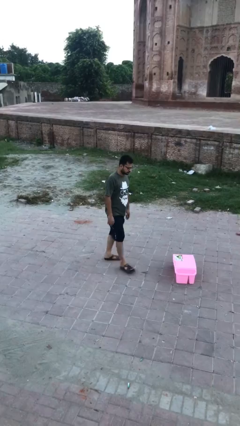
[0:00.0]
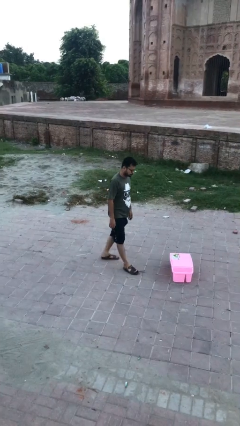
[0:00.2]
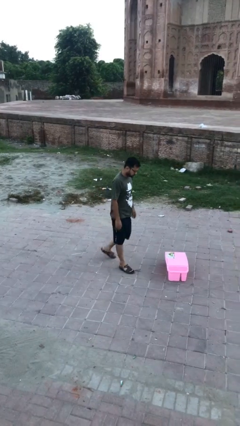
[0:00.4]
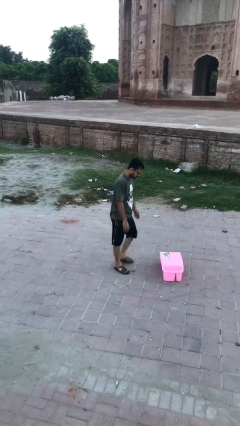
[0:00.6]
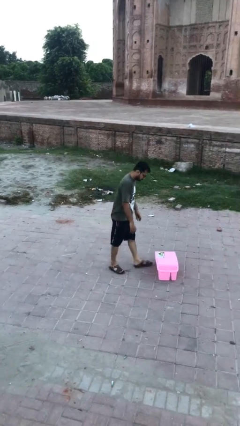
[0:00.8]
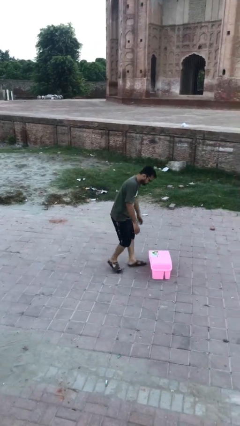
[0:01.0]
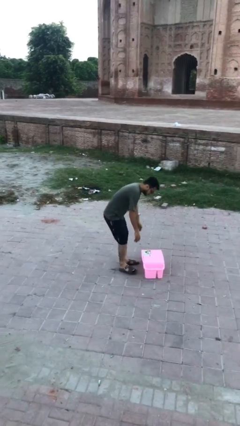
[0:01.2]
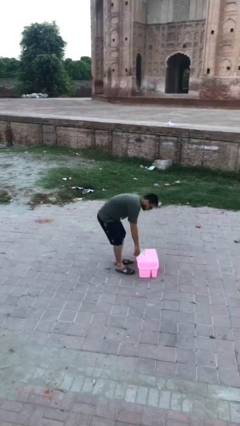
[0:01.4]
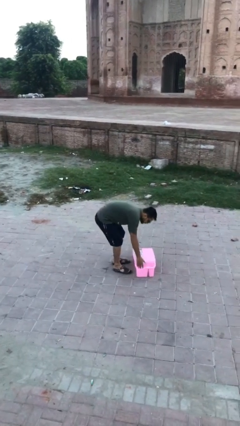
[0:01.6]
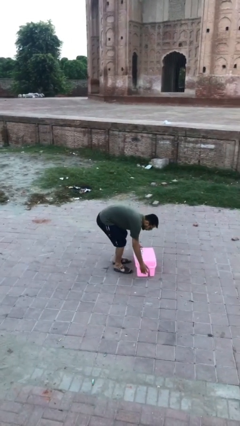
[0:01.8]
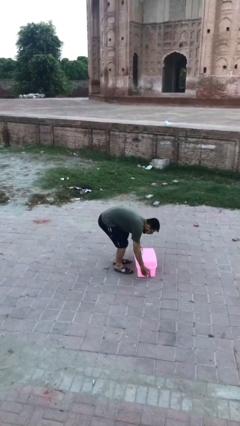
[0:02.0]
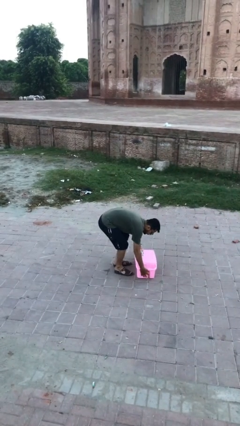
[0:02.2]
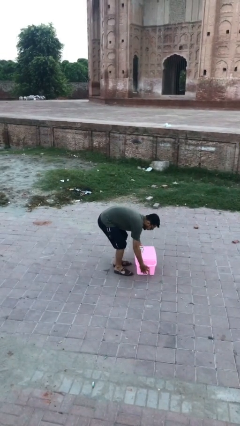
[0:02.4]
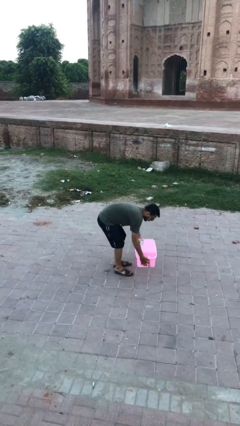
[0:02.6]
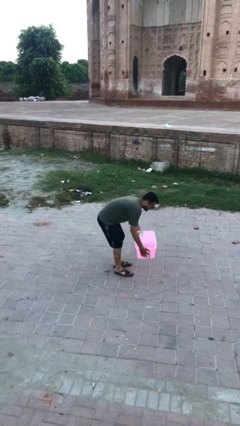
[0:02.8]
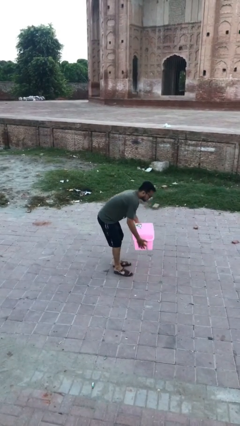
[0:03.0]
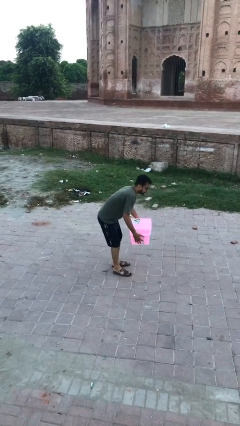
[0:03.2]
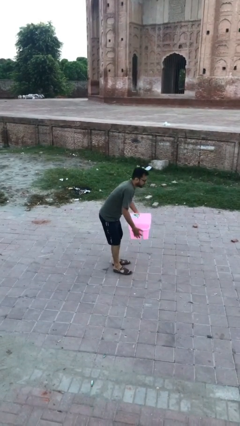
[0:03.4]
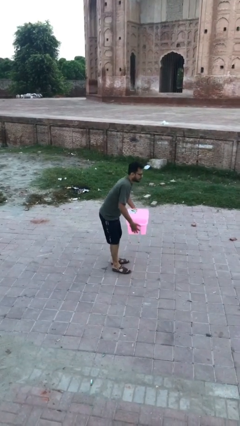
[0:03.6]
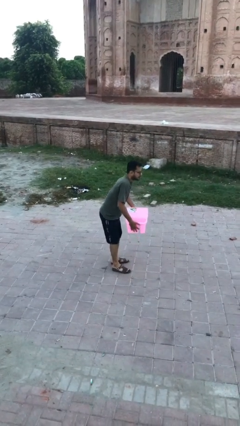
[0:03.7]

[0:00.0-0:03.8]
person picks up object from floor

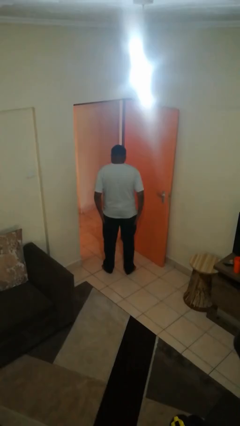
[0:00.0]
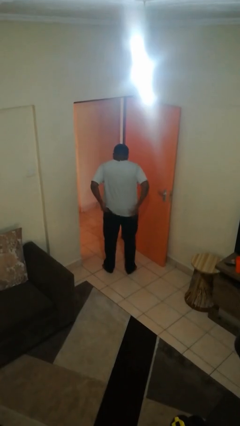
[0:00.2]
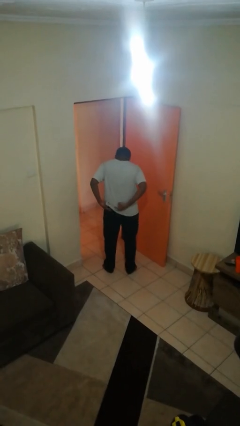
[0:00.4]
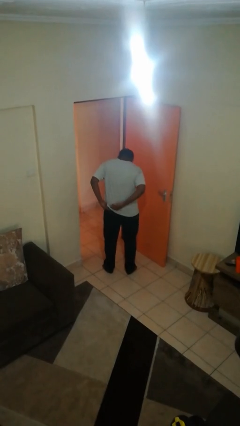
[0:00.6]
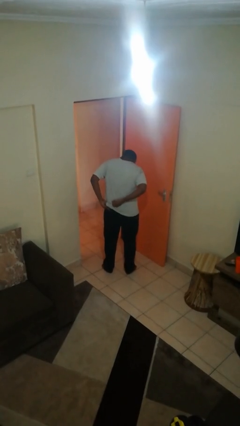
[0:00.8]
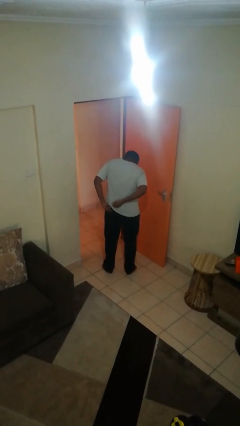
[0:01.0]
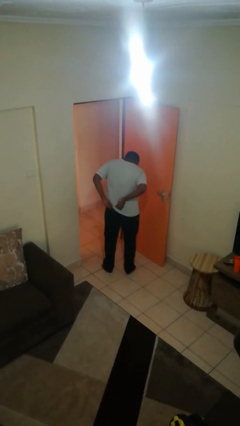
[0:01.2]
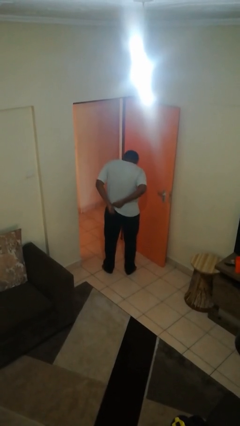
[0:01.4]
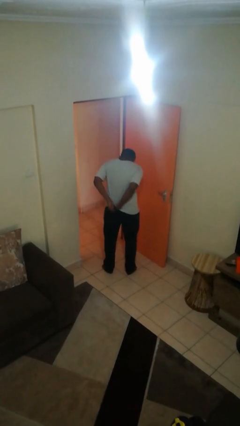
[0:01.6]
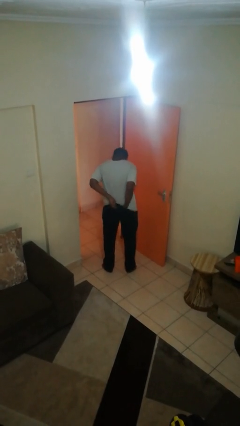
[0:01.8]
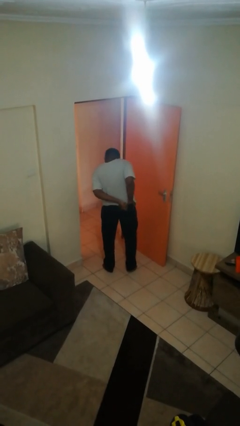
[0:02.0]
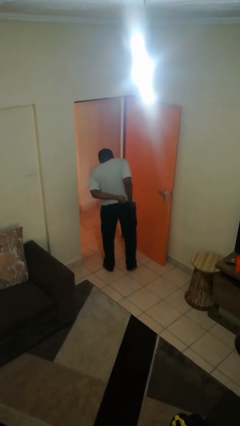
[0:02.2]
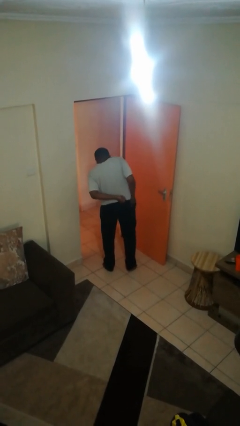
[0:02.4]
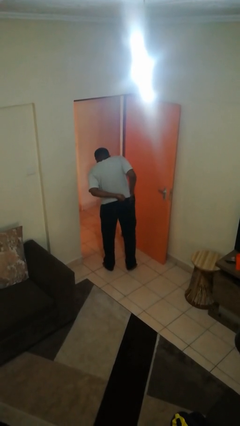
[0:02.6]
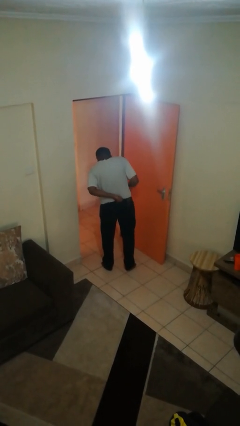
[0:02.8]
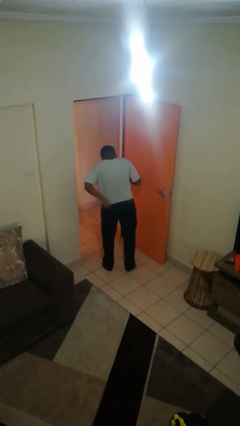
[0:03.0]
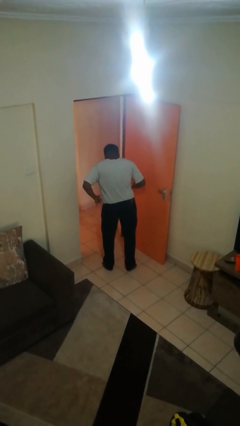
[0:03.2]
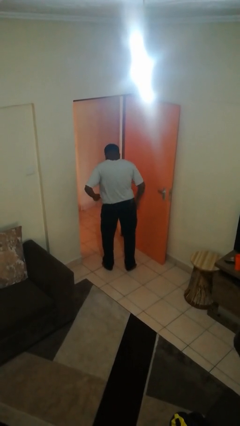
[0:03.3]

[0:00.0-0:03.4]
person tucks in shirt

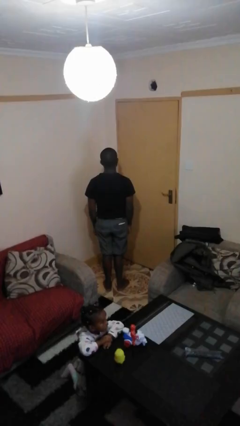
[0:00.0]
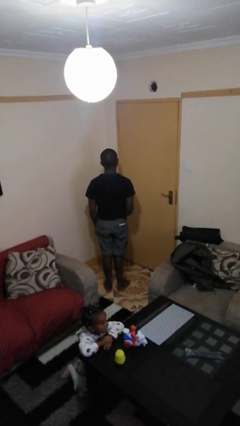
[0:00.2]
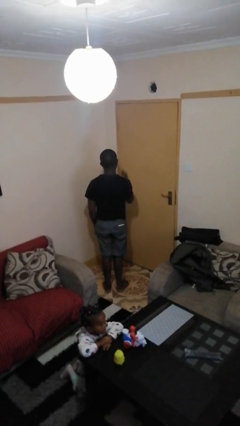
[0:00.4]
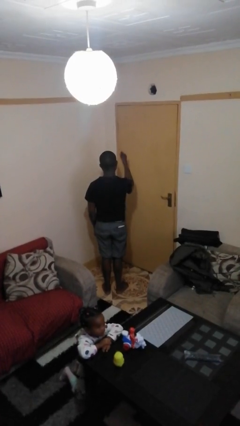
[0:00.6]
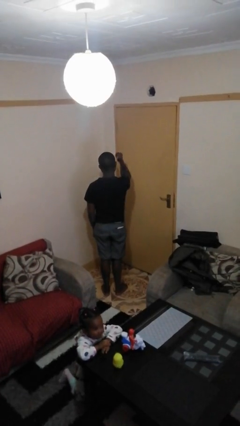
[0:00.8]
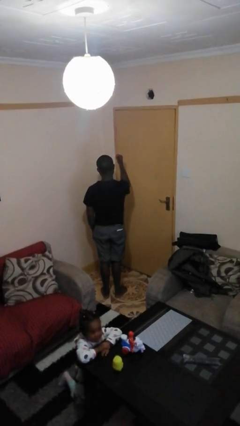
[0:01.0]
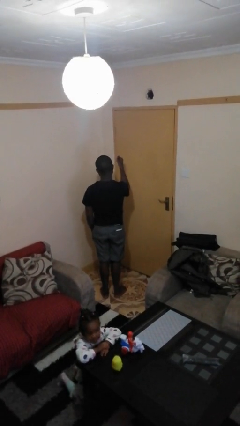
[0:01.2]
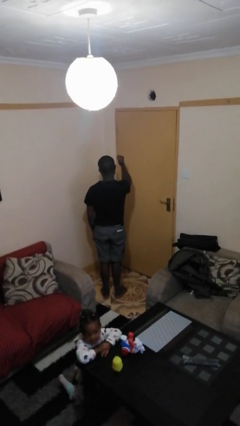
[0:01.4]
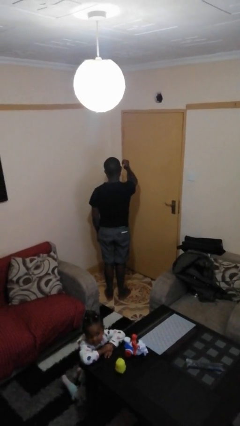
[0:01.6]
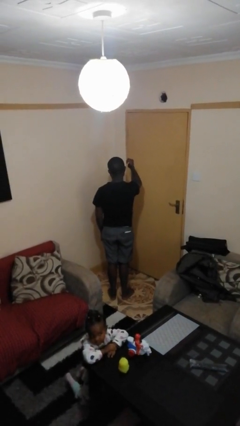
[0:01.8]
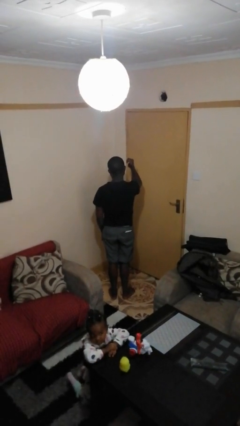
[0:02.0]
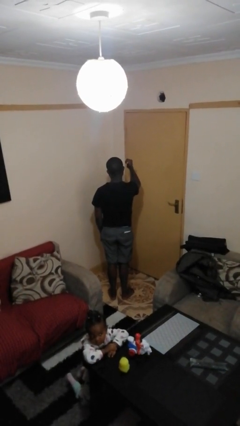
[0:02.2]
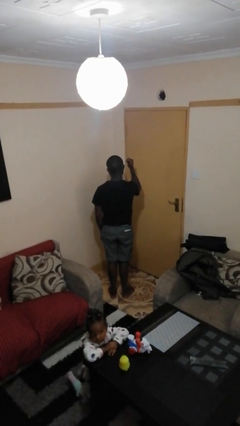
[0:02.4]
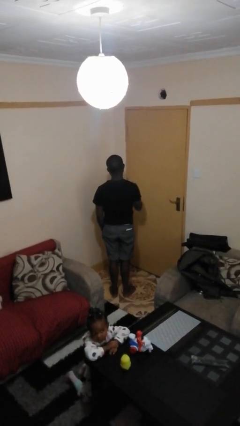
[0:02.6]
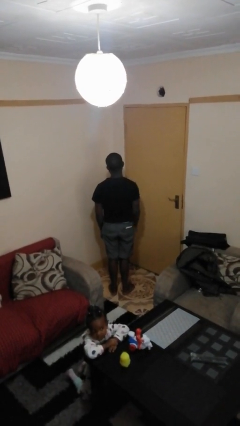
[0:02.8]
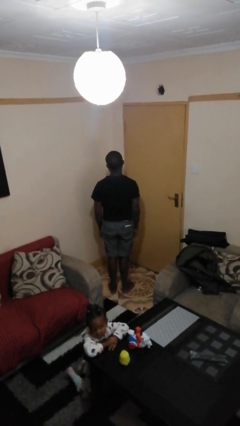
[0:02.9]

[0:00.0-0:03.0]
person gestures behind me

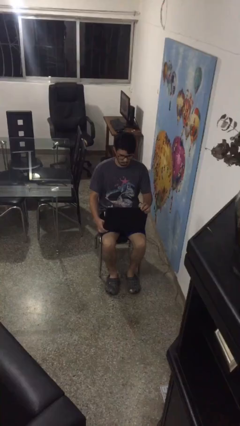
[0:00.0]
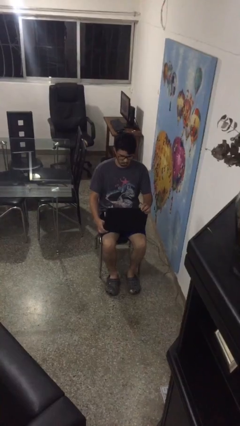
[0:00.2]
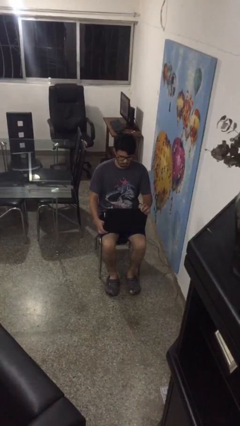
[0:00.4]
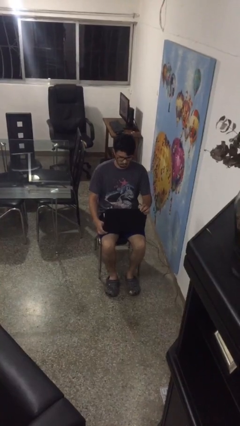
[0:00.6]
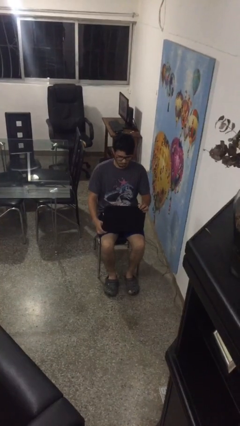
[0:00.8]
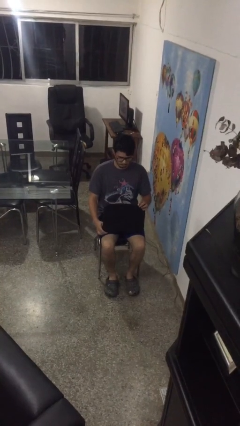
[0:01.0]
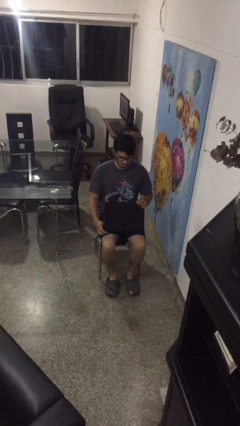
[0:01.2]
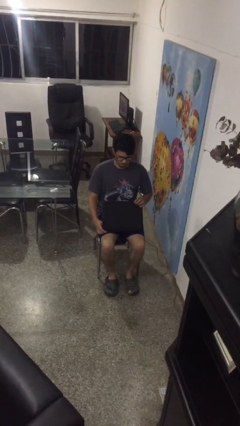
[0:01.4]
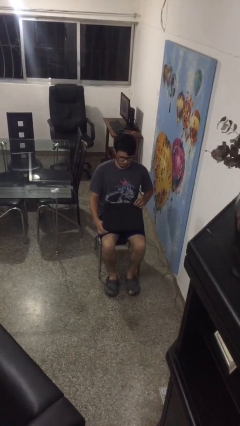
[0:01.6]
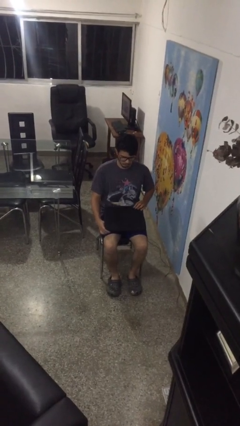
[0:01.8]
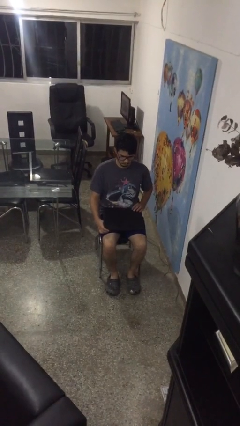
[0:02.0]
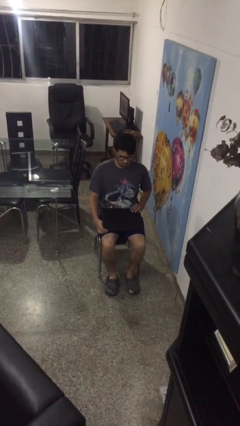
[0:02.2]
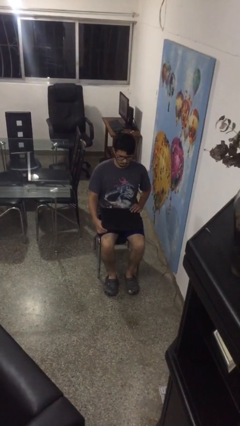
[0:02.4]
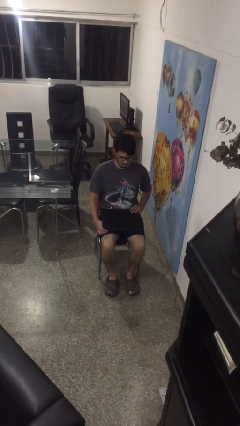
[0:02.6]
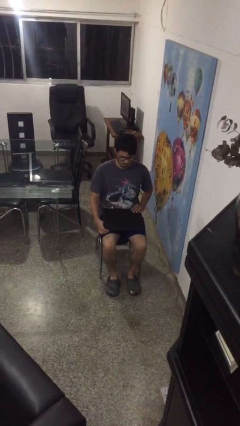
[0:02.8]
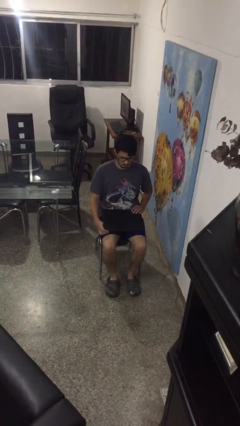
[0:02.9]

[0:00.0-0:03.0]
person closes laptop

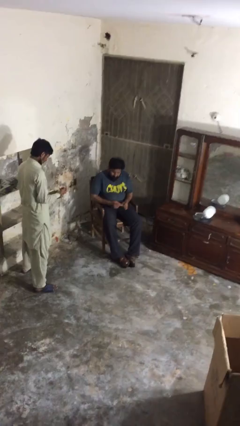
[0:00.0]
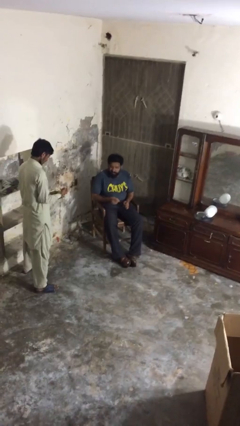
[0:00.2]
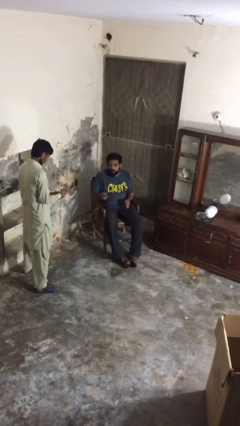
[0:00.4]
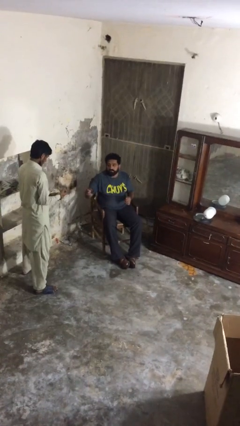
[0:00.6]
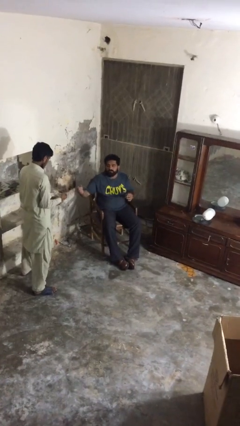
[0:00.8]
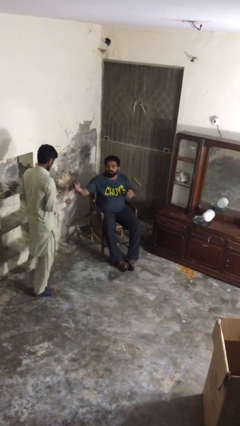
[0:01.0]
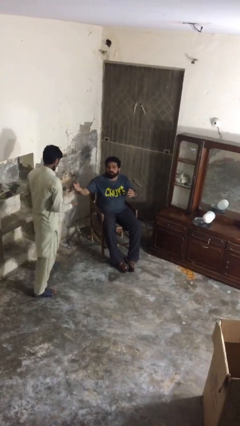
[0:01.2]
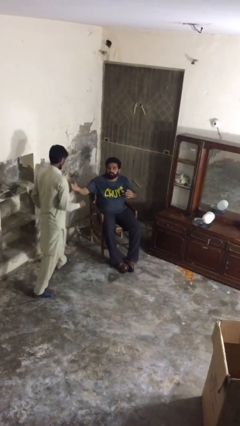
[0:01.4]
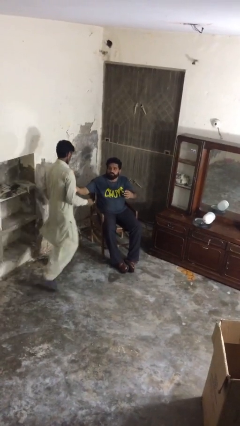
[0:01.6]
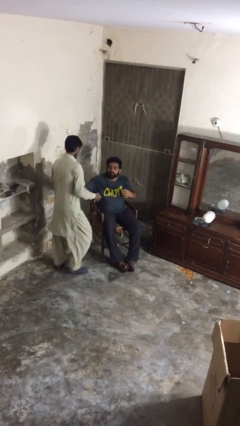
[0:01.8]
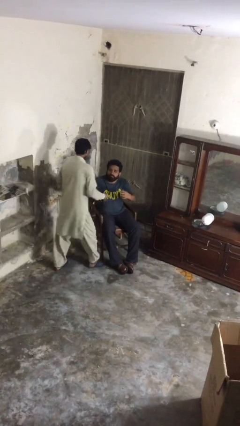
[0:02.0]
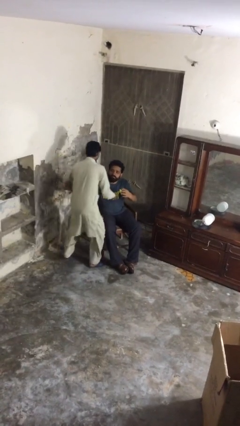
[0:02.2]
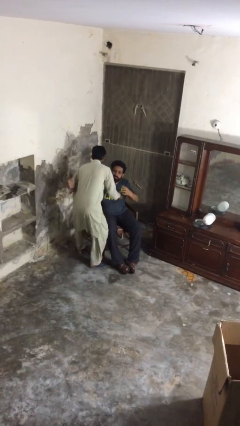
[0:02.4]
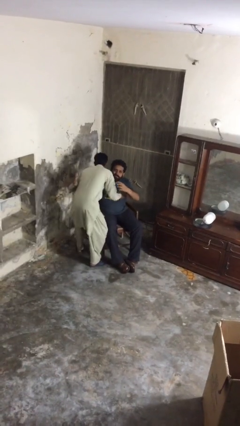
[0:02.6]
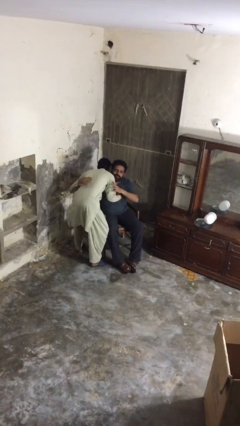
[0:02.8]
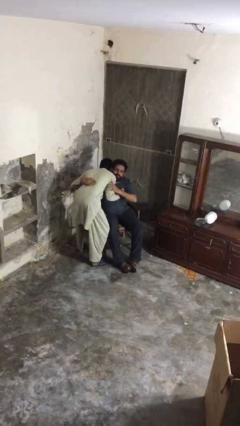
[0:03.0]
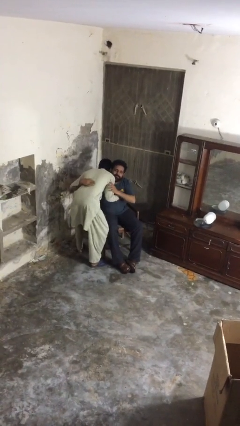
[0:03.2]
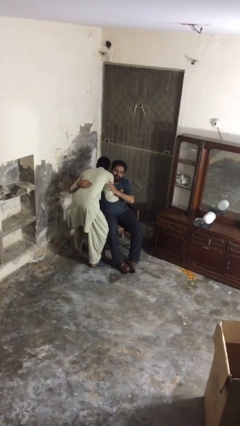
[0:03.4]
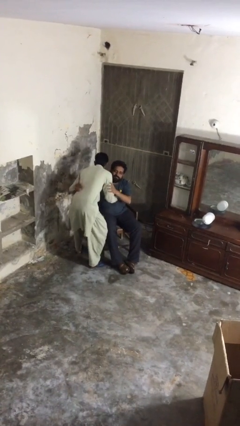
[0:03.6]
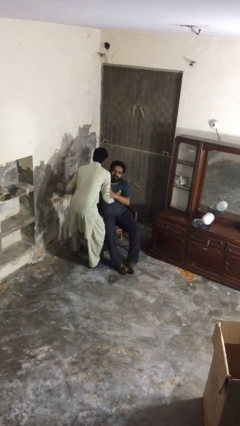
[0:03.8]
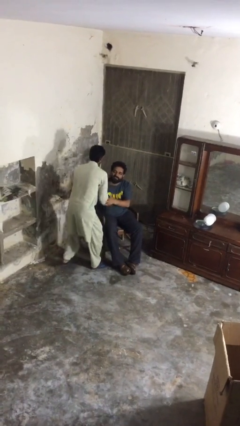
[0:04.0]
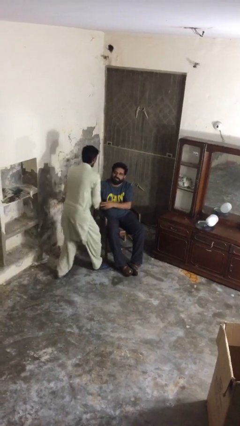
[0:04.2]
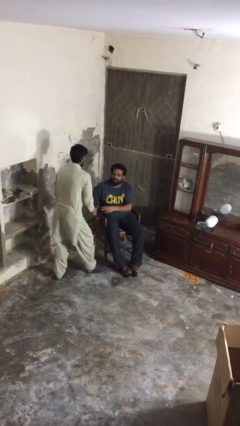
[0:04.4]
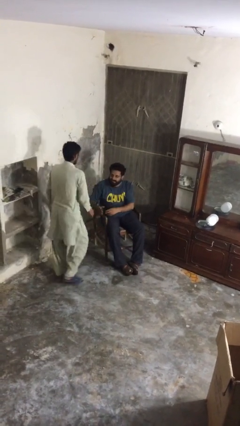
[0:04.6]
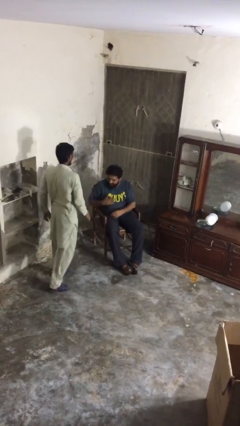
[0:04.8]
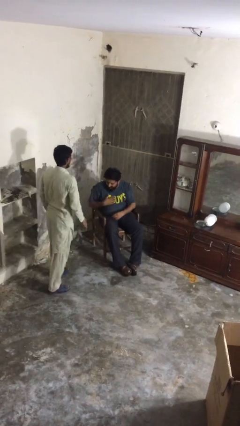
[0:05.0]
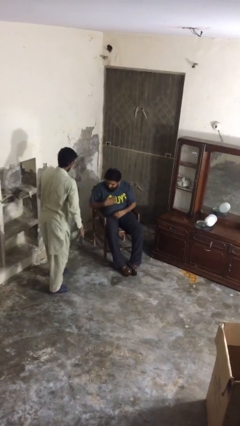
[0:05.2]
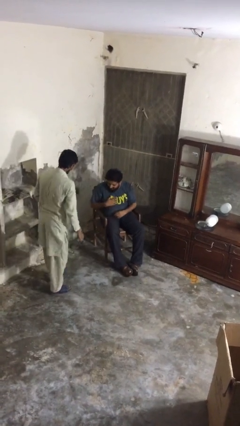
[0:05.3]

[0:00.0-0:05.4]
person embraces person
